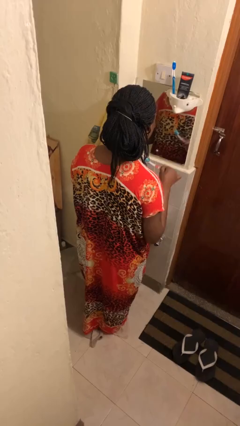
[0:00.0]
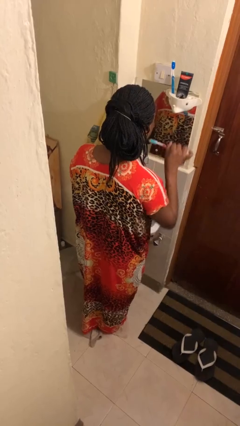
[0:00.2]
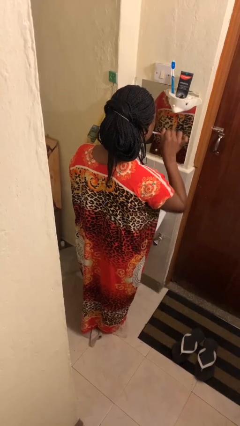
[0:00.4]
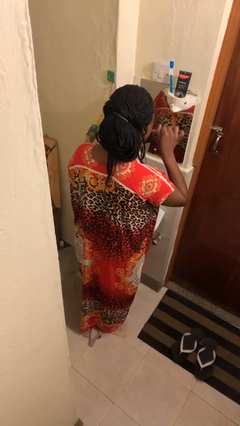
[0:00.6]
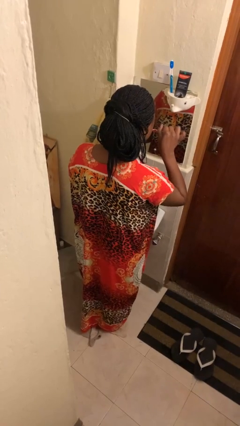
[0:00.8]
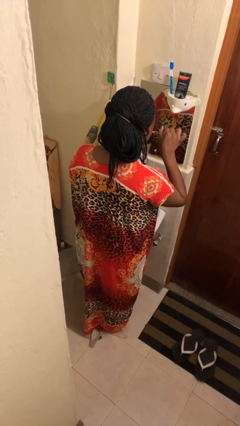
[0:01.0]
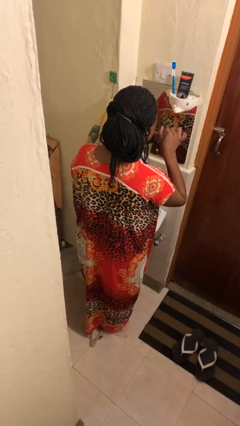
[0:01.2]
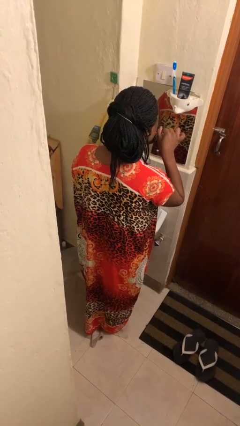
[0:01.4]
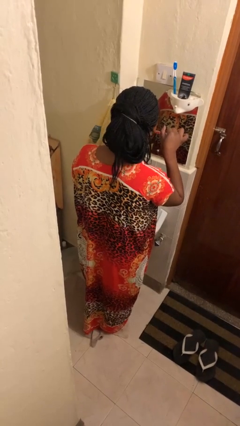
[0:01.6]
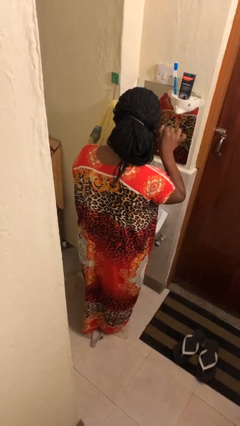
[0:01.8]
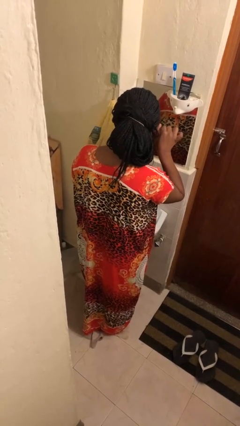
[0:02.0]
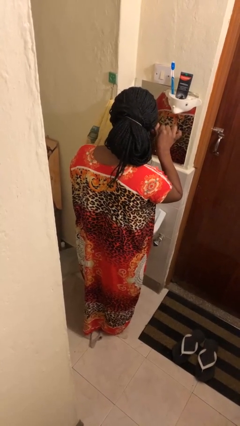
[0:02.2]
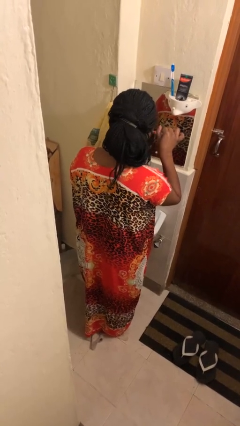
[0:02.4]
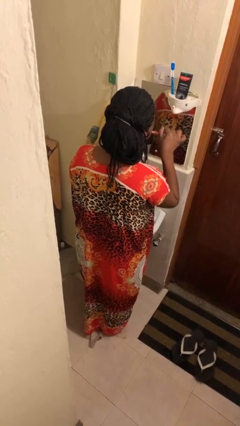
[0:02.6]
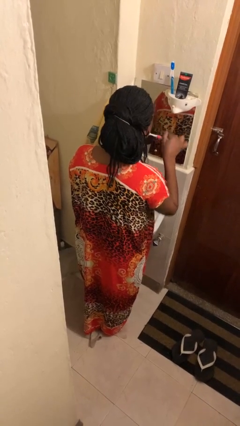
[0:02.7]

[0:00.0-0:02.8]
person brushes teeth

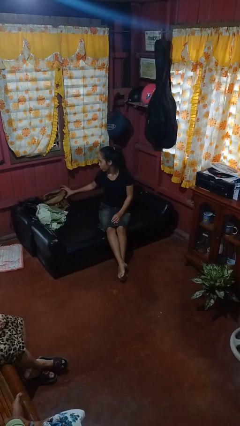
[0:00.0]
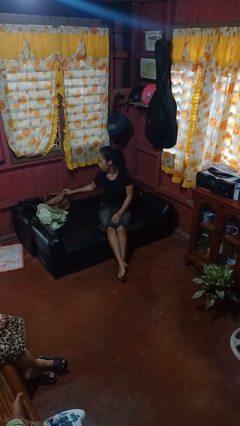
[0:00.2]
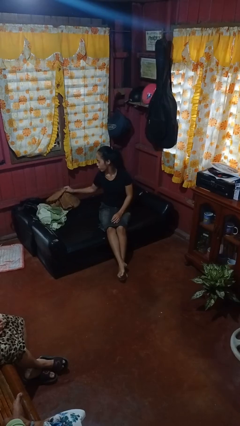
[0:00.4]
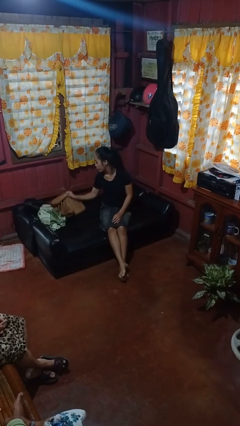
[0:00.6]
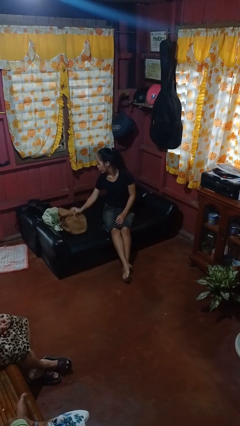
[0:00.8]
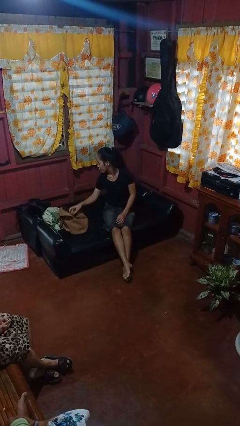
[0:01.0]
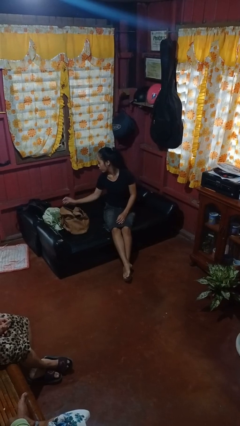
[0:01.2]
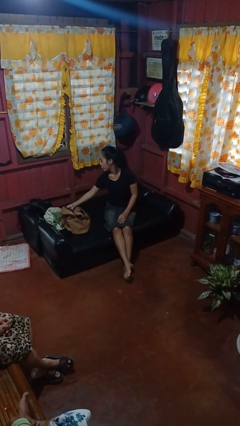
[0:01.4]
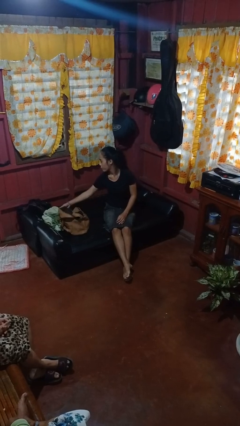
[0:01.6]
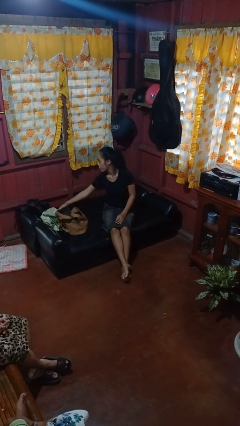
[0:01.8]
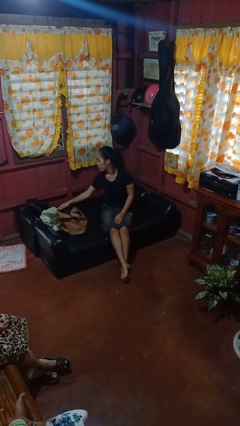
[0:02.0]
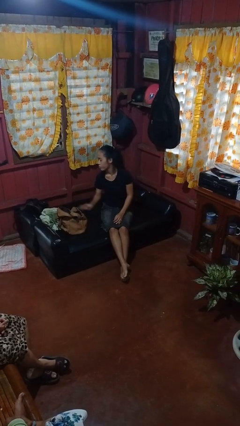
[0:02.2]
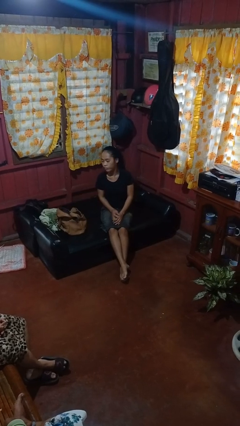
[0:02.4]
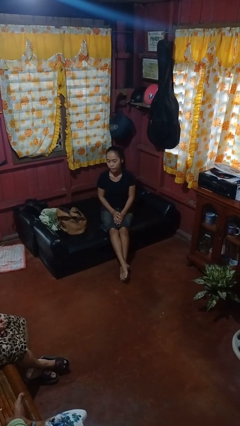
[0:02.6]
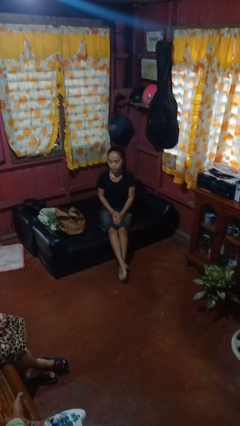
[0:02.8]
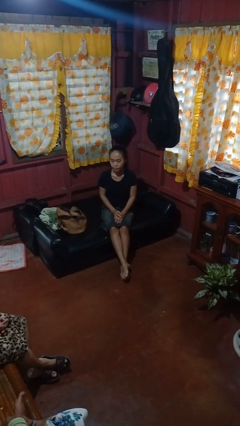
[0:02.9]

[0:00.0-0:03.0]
person searches in couch

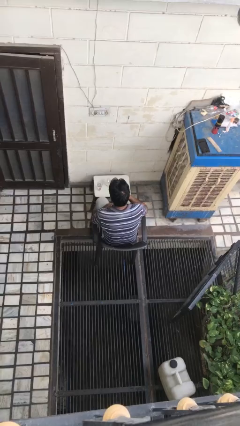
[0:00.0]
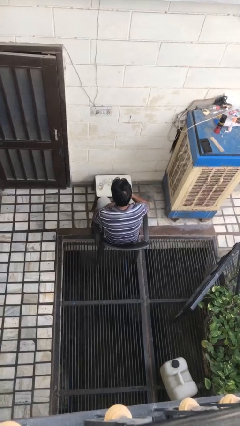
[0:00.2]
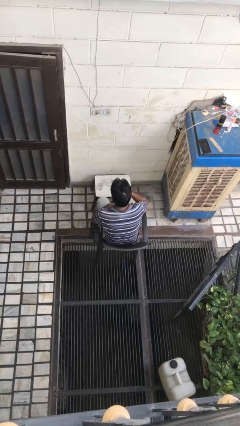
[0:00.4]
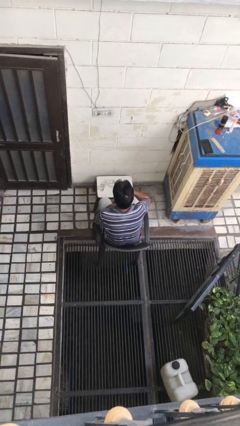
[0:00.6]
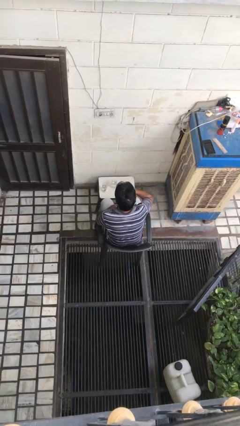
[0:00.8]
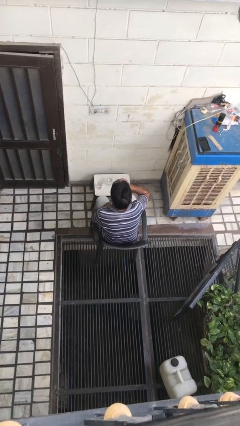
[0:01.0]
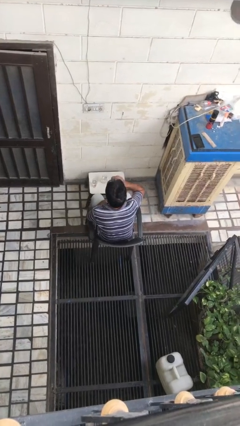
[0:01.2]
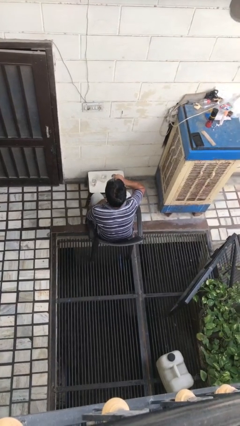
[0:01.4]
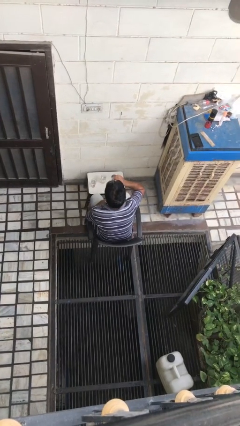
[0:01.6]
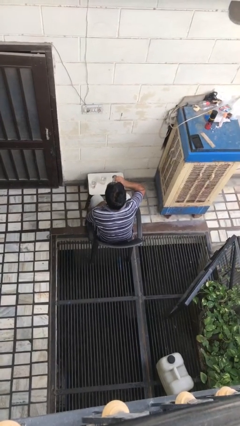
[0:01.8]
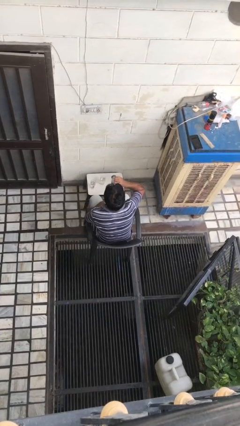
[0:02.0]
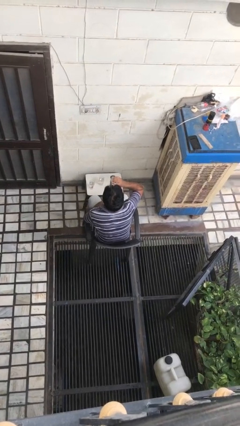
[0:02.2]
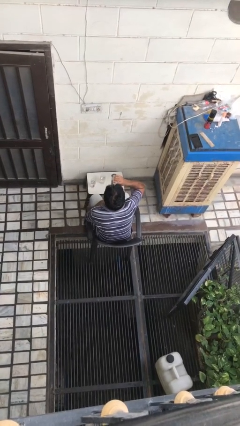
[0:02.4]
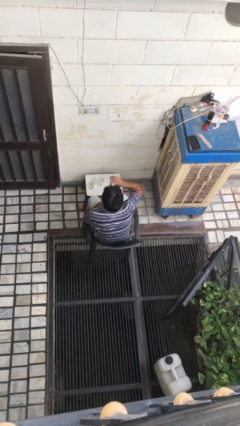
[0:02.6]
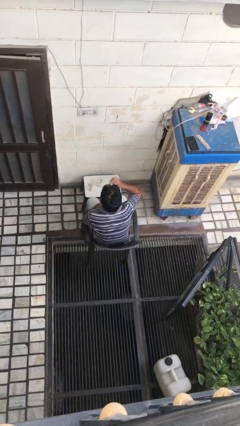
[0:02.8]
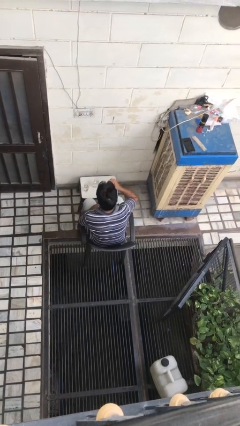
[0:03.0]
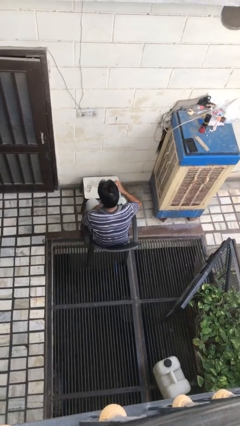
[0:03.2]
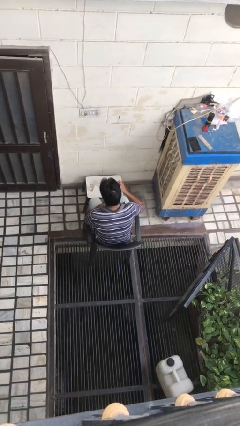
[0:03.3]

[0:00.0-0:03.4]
person drinks from shotglass

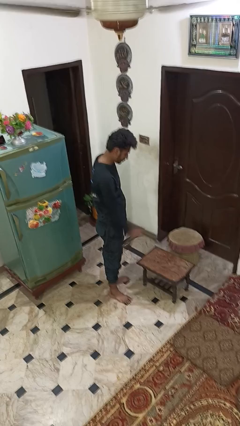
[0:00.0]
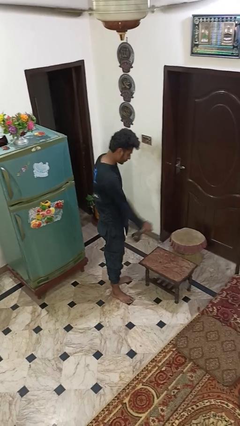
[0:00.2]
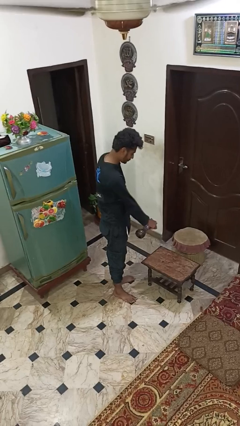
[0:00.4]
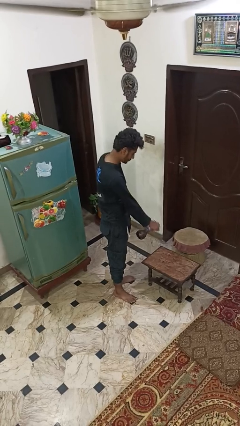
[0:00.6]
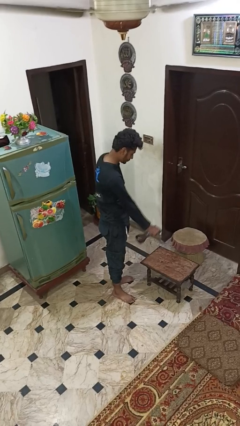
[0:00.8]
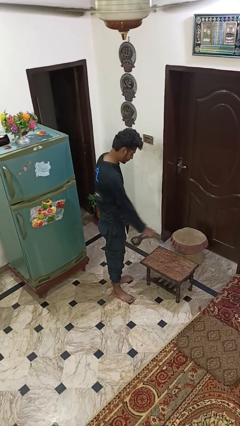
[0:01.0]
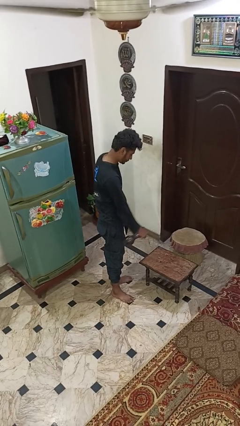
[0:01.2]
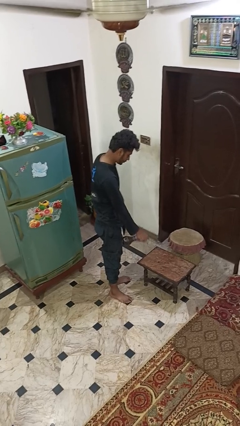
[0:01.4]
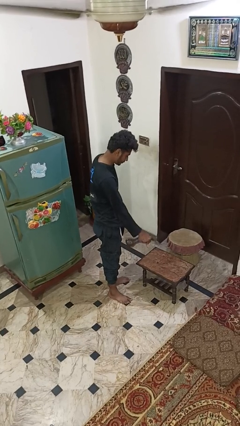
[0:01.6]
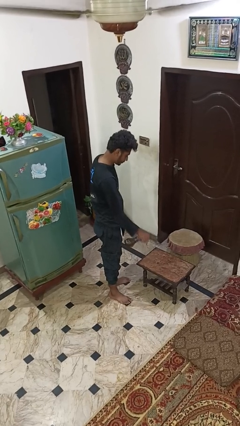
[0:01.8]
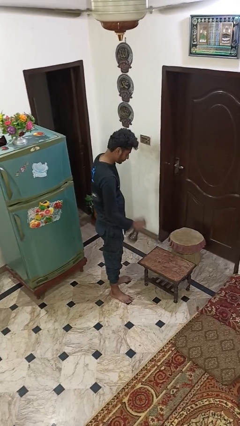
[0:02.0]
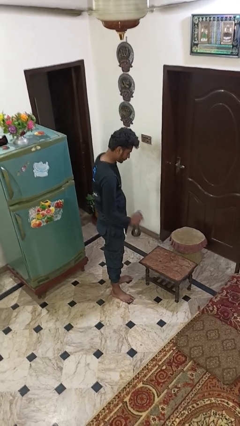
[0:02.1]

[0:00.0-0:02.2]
person sprays from bottle

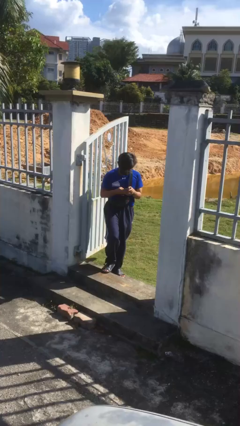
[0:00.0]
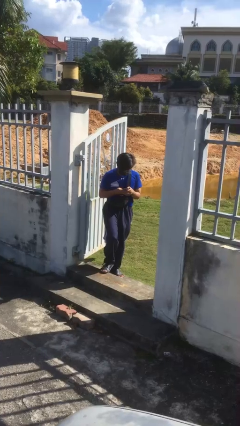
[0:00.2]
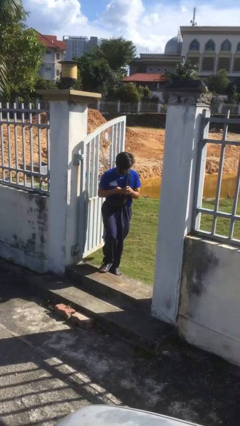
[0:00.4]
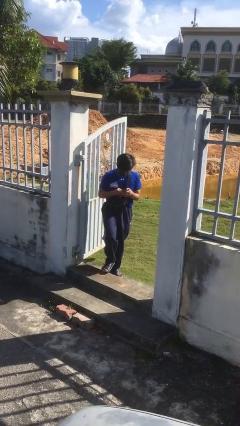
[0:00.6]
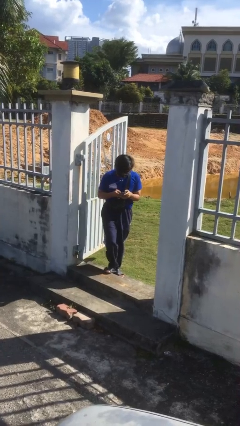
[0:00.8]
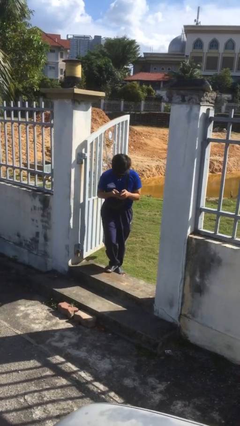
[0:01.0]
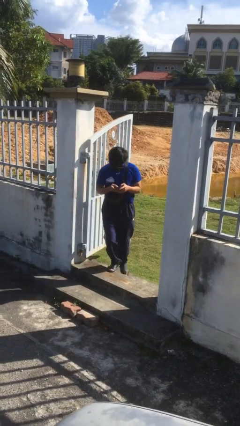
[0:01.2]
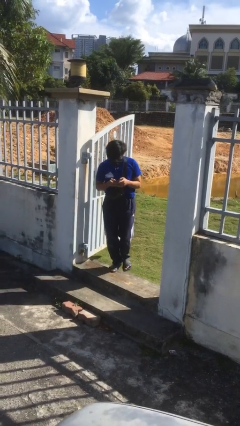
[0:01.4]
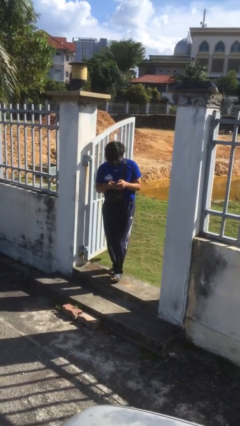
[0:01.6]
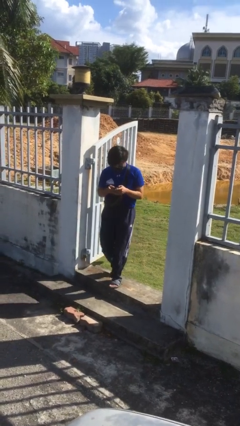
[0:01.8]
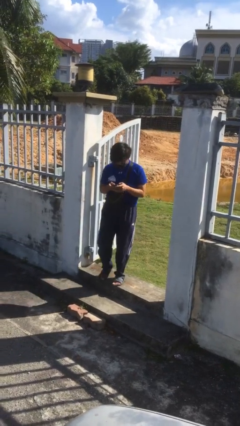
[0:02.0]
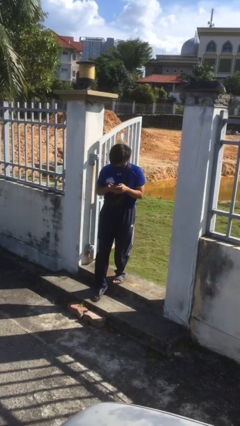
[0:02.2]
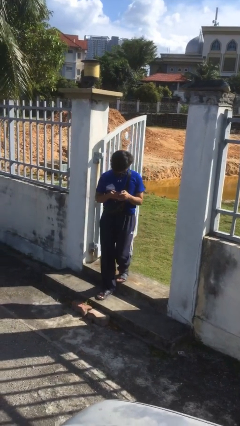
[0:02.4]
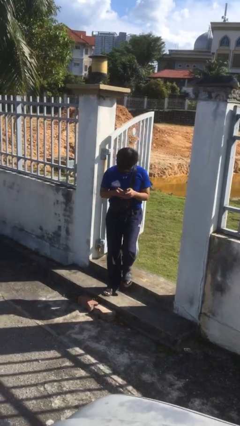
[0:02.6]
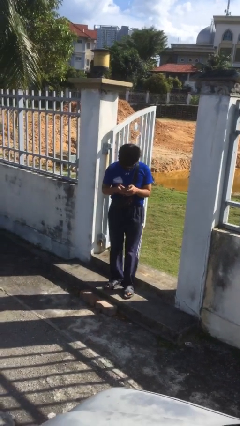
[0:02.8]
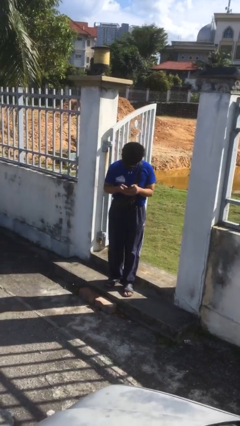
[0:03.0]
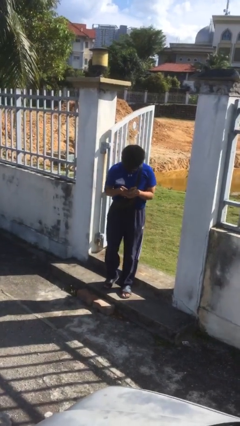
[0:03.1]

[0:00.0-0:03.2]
person enters scene through structure

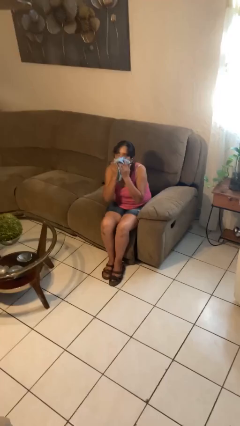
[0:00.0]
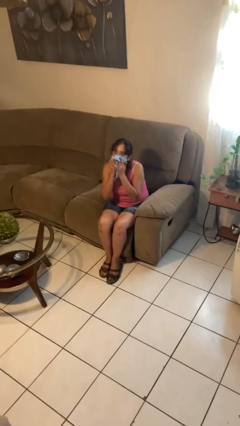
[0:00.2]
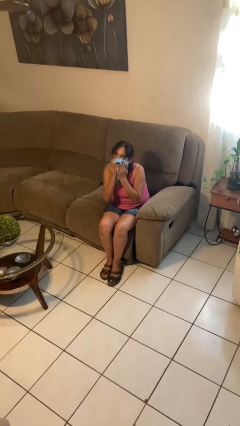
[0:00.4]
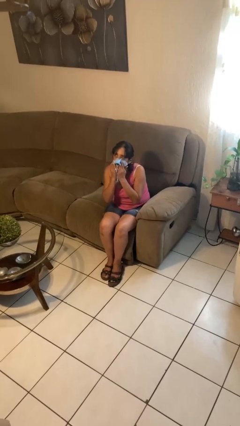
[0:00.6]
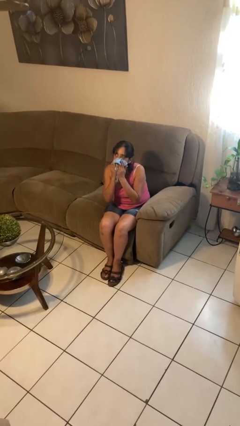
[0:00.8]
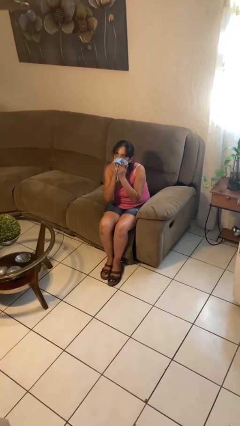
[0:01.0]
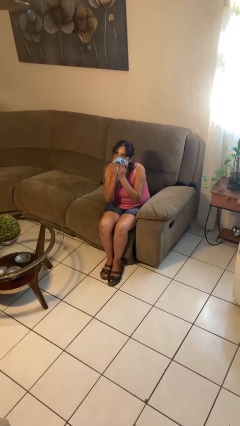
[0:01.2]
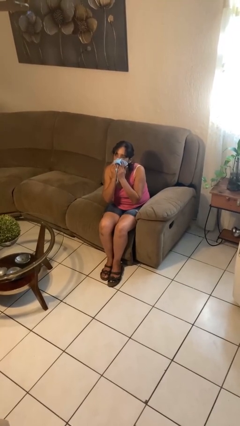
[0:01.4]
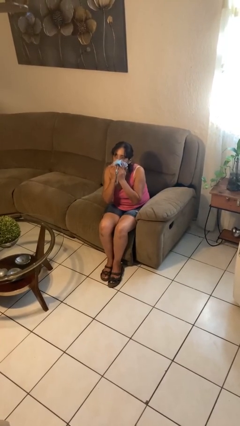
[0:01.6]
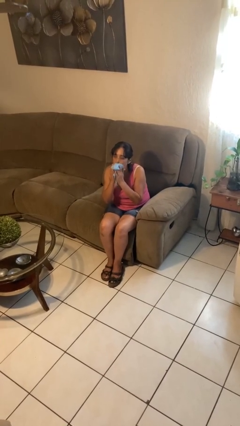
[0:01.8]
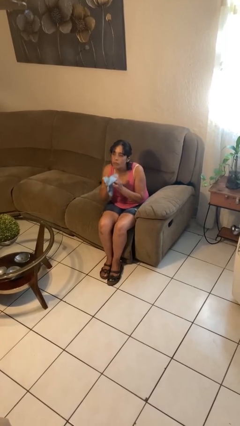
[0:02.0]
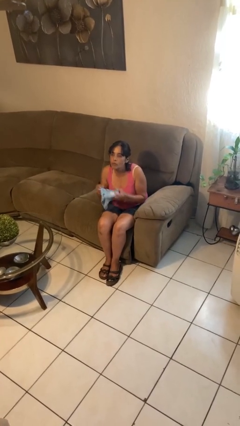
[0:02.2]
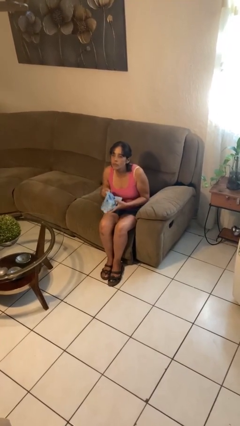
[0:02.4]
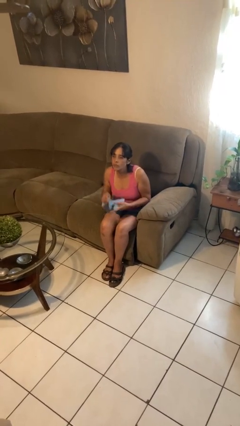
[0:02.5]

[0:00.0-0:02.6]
person blows nose
